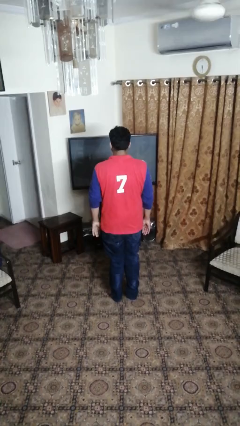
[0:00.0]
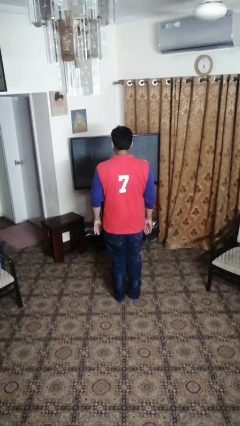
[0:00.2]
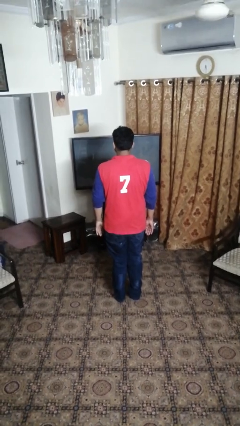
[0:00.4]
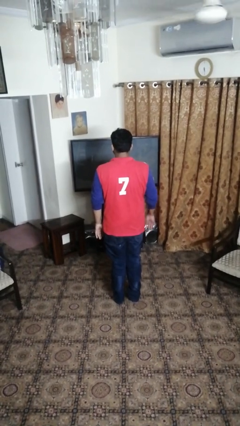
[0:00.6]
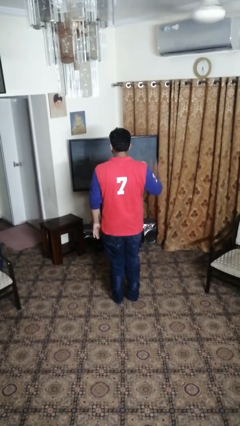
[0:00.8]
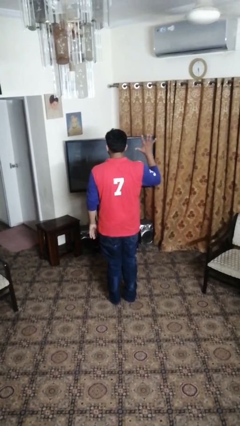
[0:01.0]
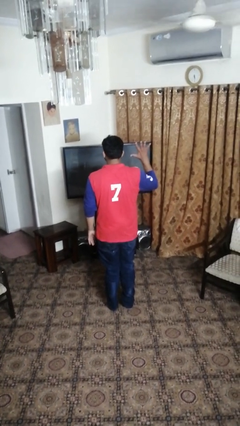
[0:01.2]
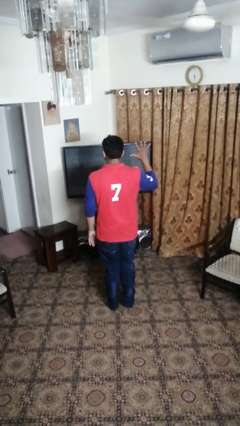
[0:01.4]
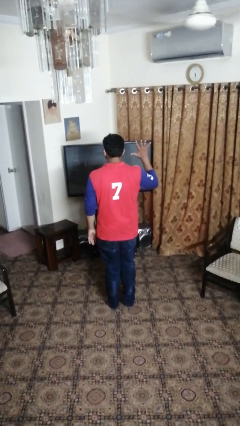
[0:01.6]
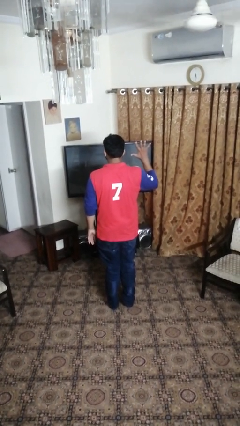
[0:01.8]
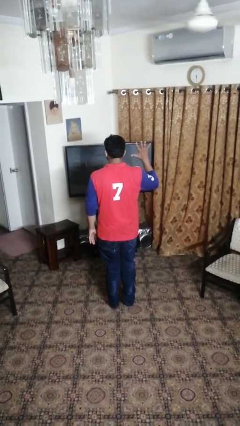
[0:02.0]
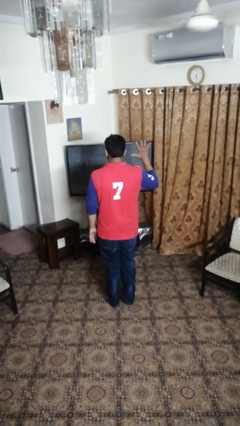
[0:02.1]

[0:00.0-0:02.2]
person gestures number five

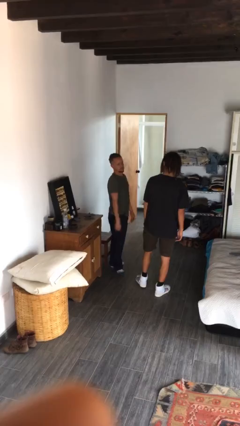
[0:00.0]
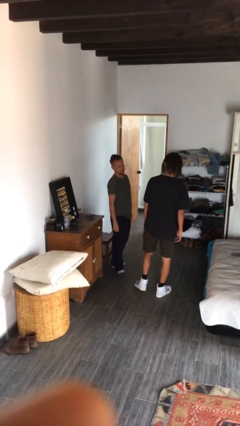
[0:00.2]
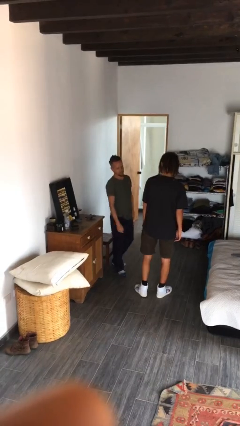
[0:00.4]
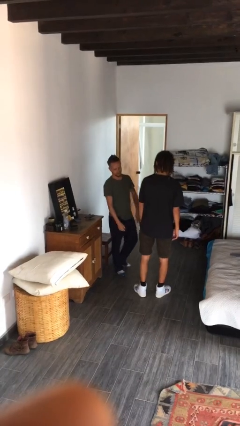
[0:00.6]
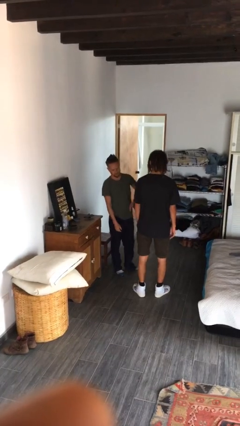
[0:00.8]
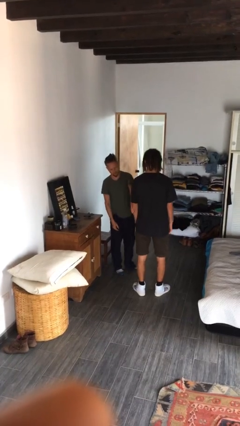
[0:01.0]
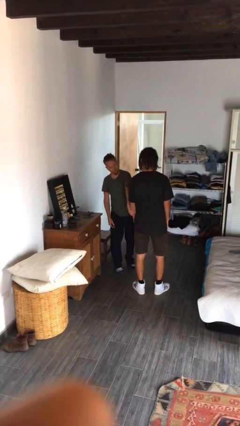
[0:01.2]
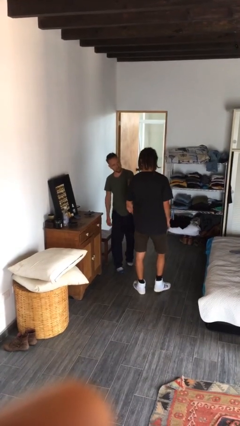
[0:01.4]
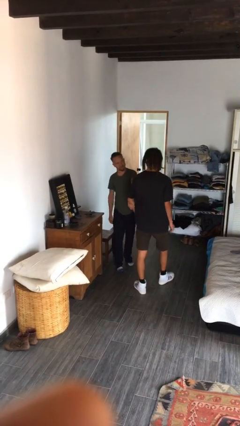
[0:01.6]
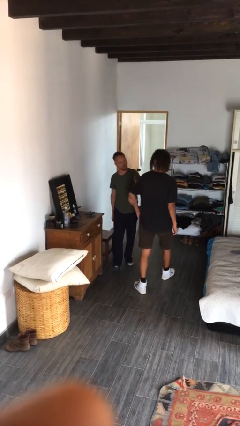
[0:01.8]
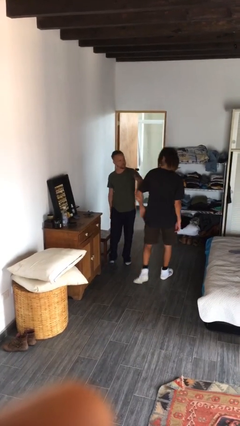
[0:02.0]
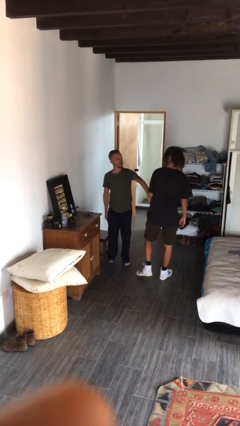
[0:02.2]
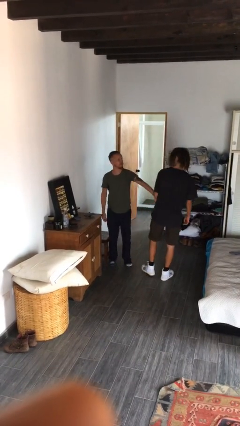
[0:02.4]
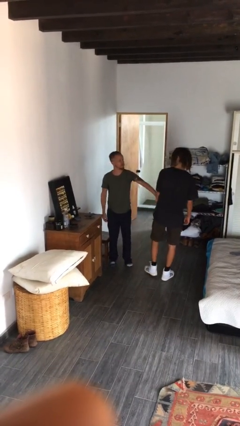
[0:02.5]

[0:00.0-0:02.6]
person grabs person by forearm

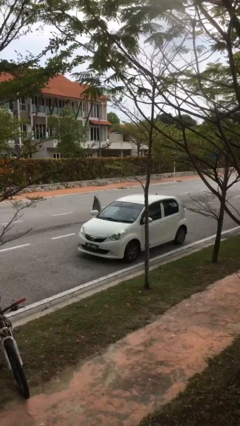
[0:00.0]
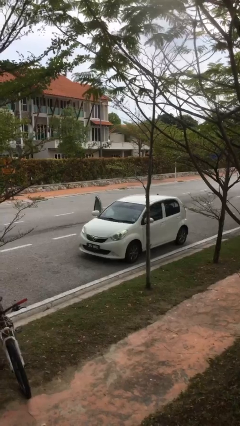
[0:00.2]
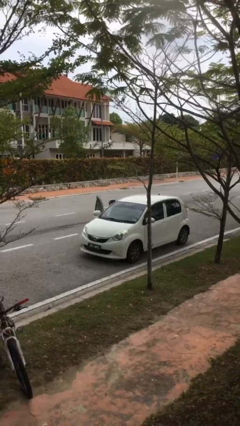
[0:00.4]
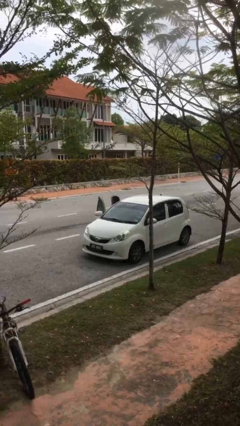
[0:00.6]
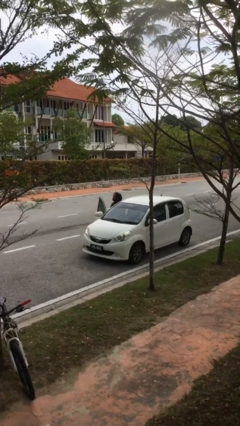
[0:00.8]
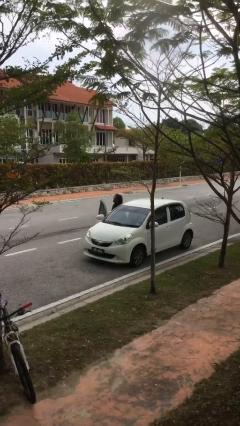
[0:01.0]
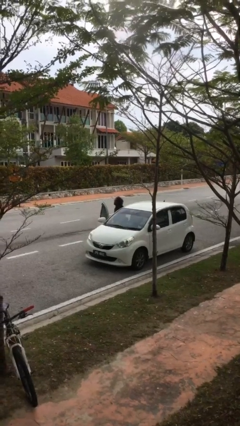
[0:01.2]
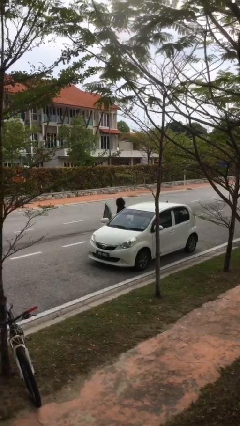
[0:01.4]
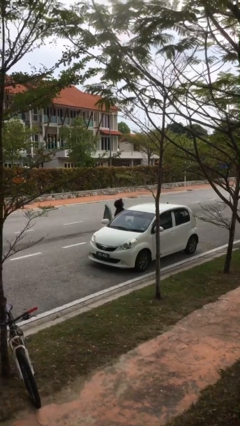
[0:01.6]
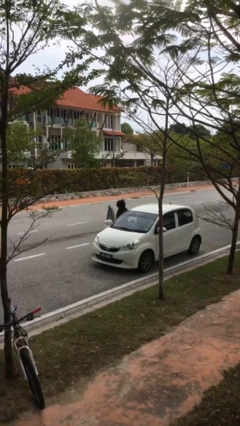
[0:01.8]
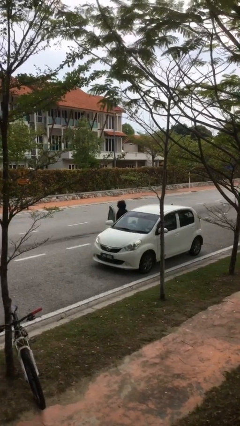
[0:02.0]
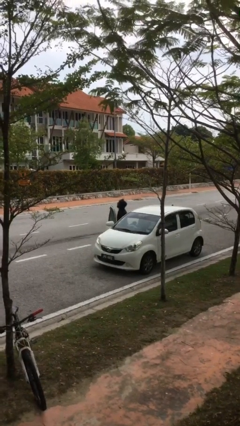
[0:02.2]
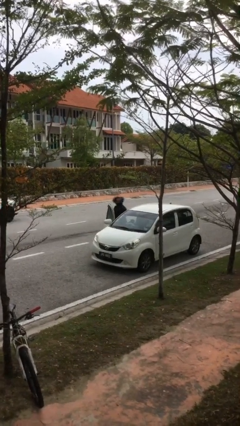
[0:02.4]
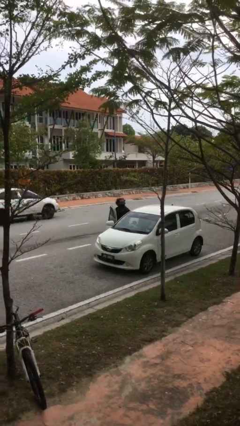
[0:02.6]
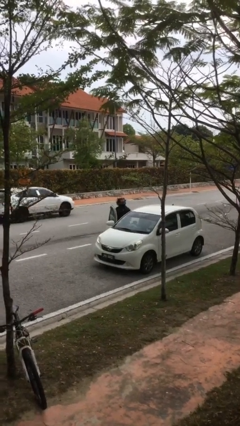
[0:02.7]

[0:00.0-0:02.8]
person exits car

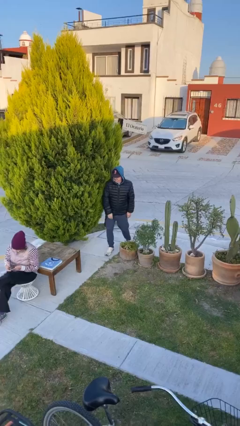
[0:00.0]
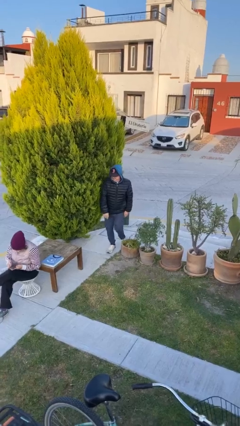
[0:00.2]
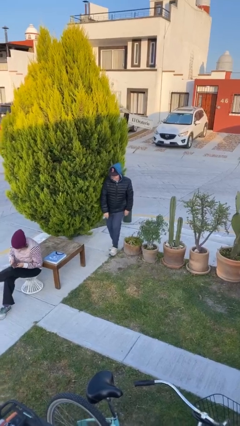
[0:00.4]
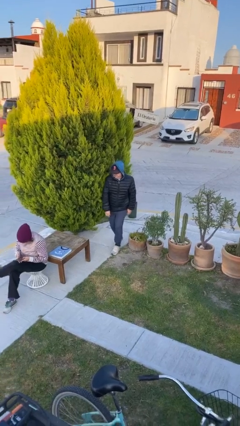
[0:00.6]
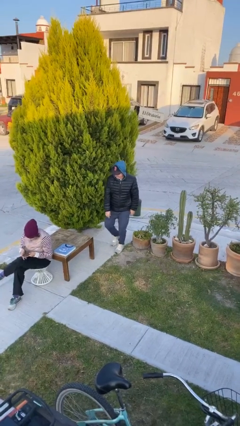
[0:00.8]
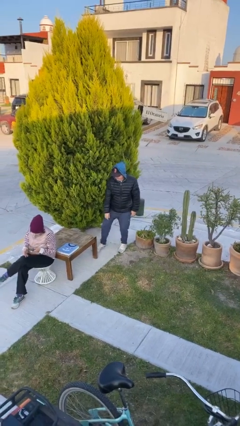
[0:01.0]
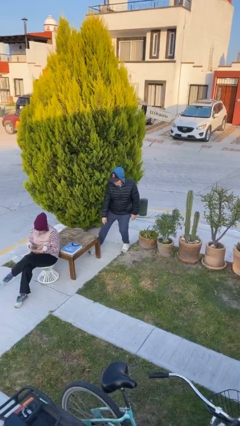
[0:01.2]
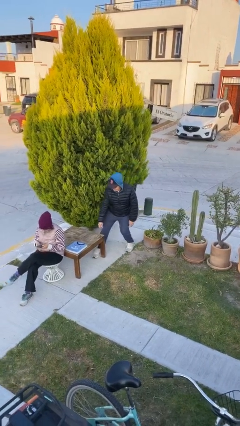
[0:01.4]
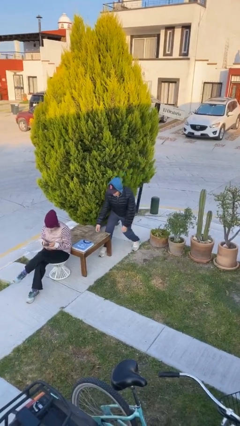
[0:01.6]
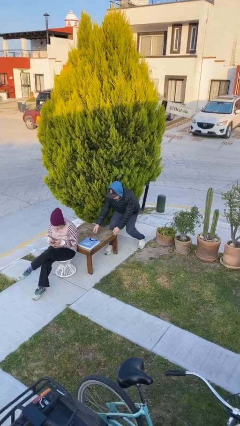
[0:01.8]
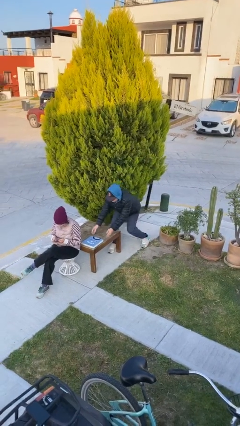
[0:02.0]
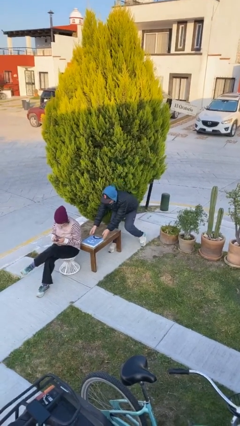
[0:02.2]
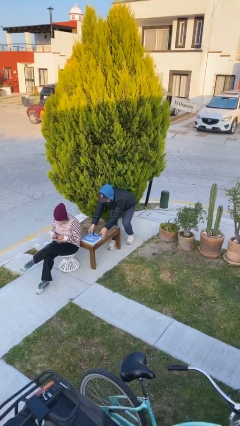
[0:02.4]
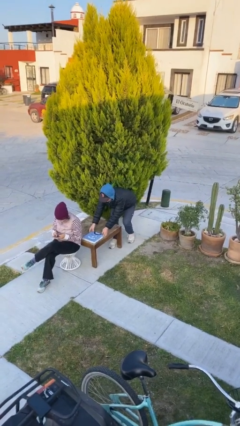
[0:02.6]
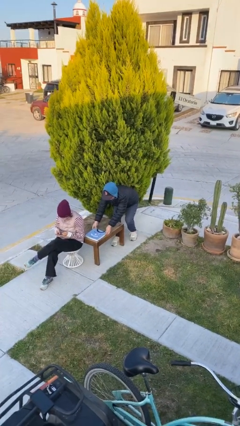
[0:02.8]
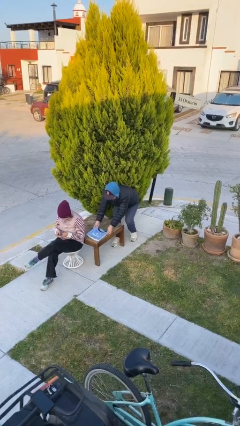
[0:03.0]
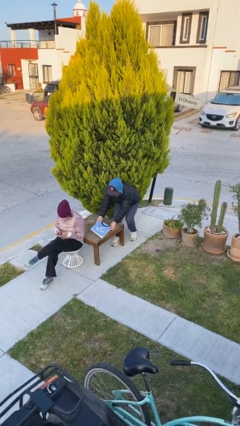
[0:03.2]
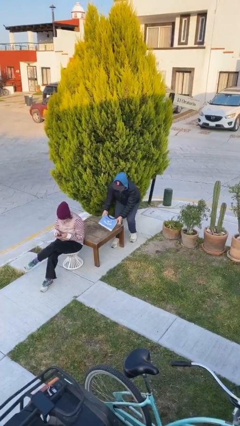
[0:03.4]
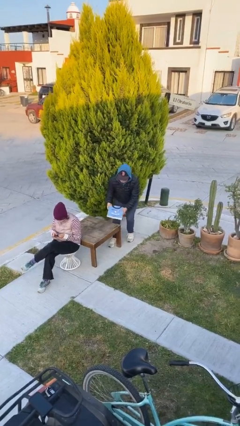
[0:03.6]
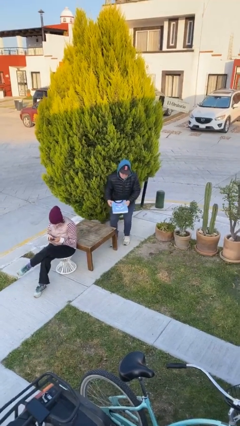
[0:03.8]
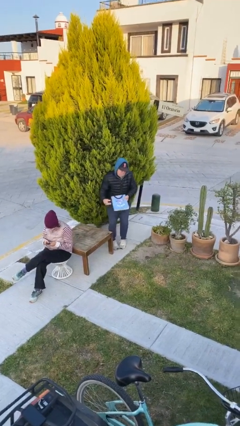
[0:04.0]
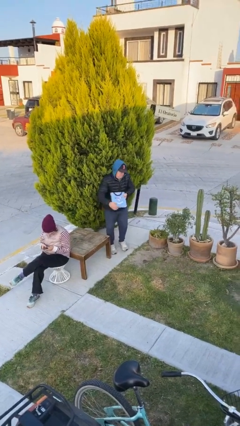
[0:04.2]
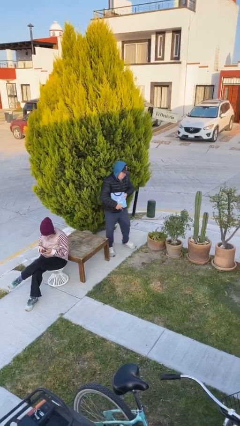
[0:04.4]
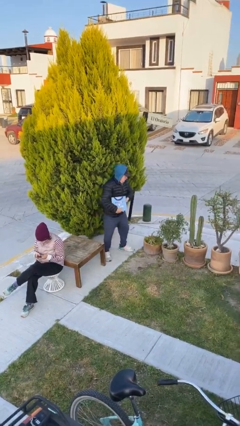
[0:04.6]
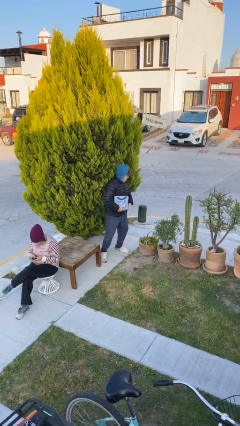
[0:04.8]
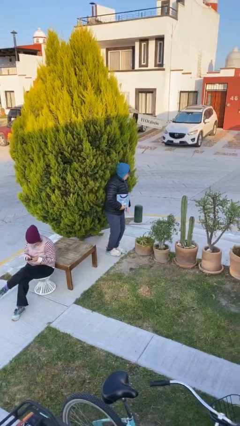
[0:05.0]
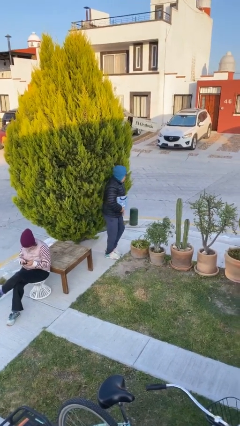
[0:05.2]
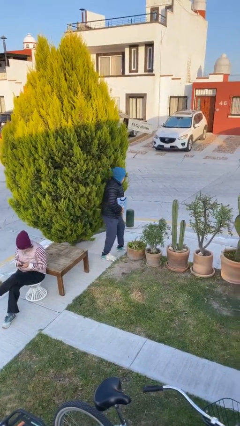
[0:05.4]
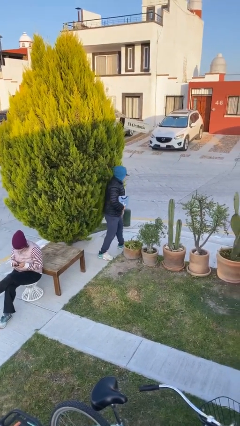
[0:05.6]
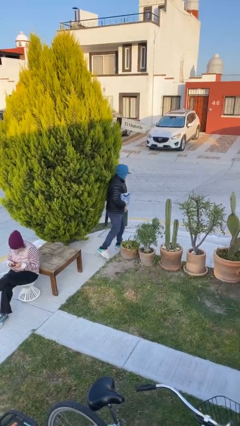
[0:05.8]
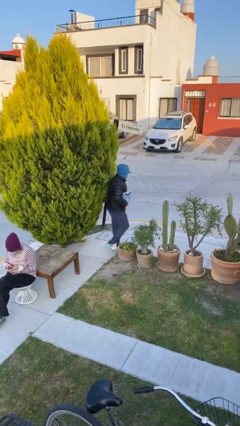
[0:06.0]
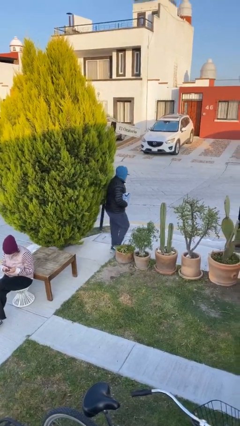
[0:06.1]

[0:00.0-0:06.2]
person steals object from person

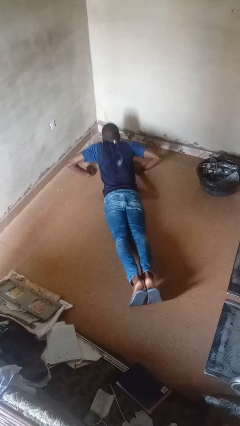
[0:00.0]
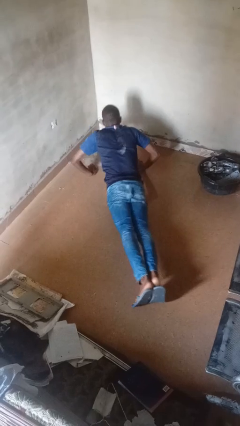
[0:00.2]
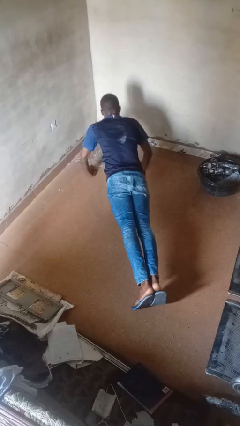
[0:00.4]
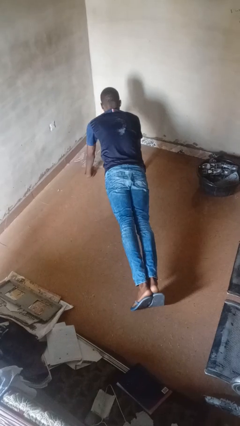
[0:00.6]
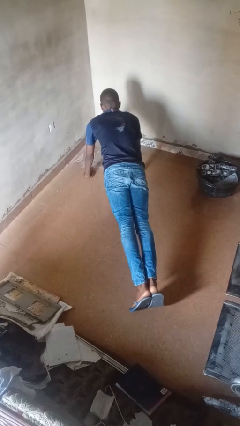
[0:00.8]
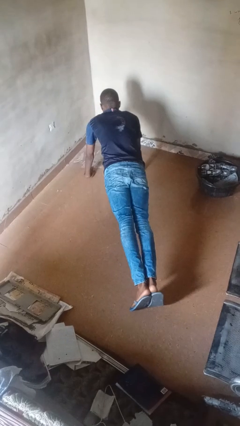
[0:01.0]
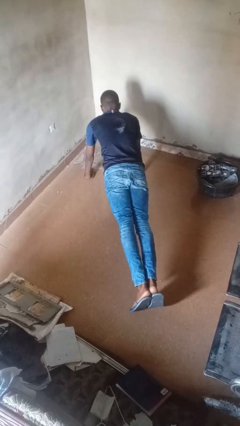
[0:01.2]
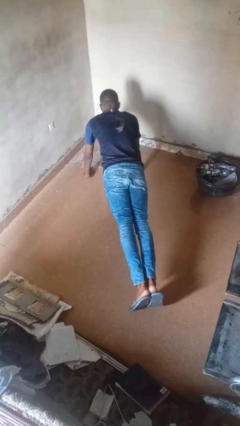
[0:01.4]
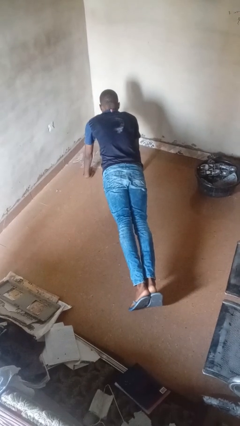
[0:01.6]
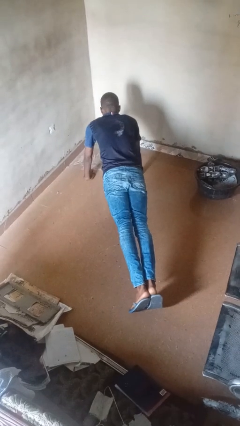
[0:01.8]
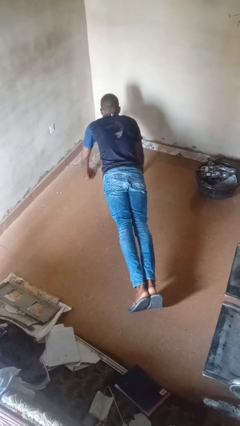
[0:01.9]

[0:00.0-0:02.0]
person exercises with pushup

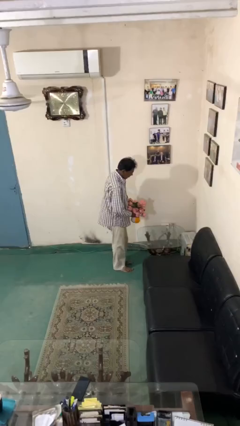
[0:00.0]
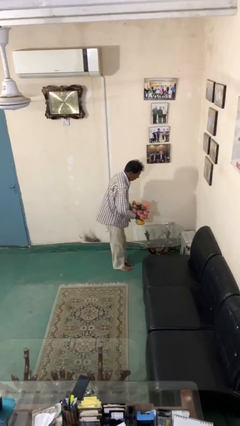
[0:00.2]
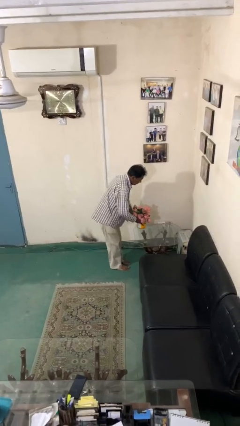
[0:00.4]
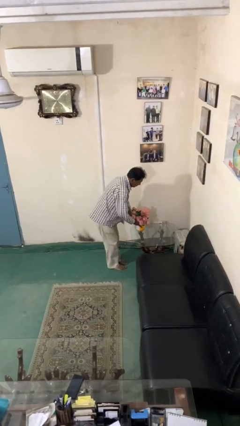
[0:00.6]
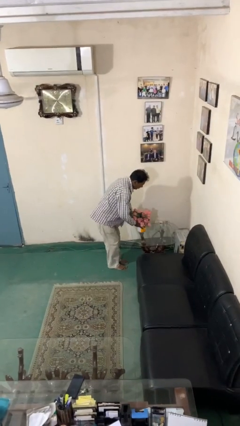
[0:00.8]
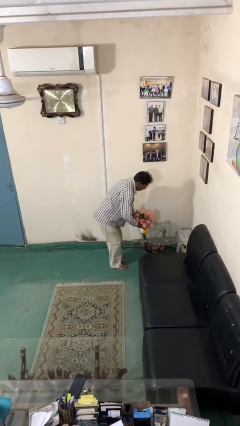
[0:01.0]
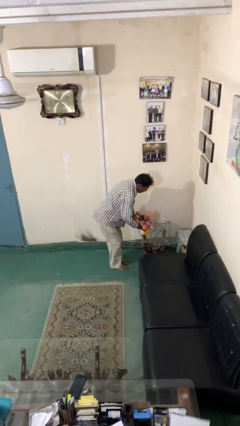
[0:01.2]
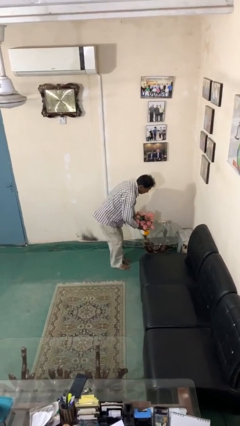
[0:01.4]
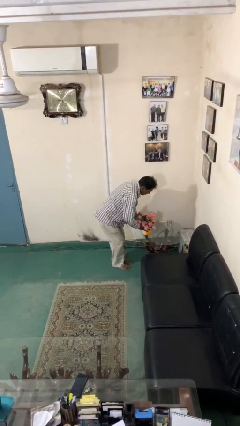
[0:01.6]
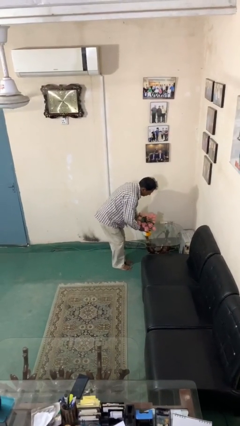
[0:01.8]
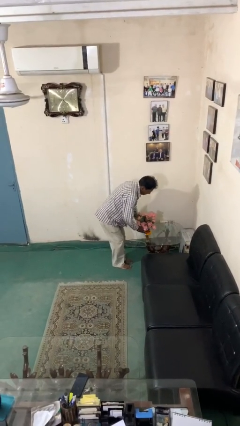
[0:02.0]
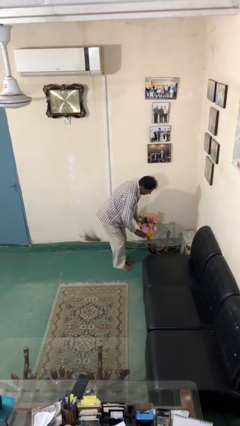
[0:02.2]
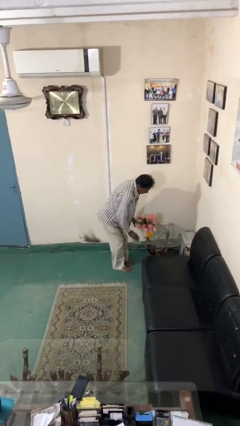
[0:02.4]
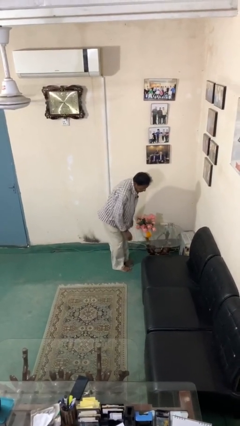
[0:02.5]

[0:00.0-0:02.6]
person puts down object on table
